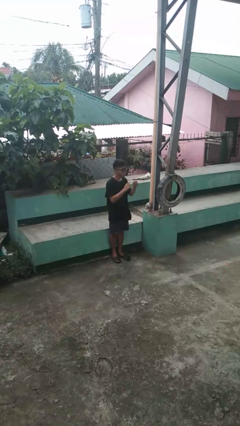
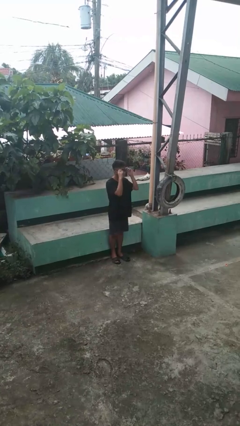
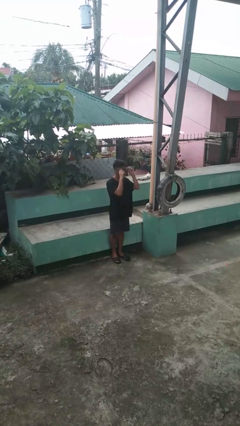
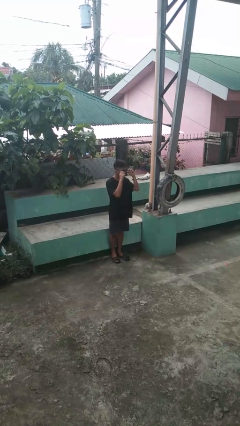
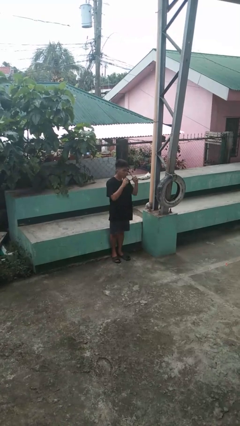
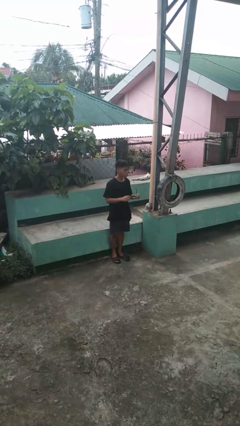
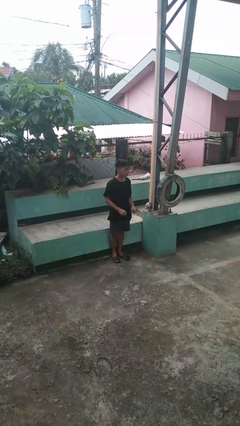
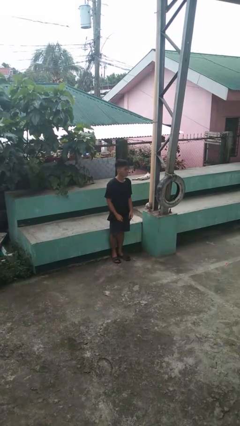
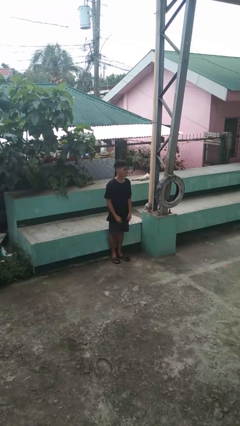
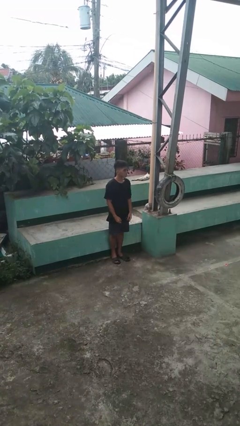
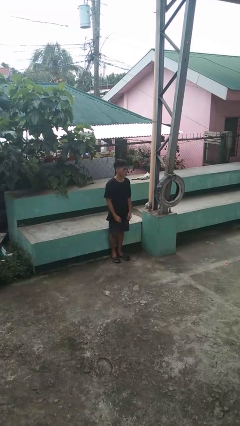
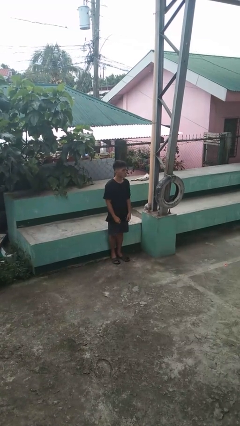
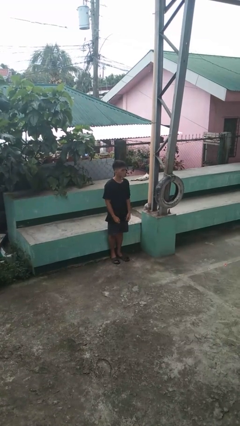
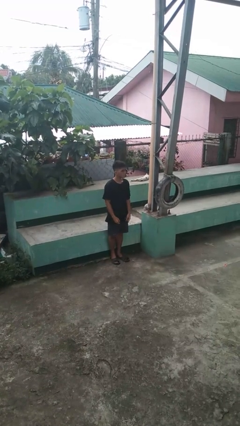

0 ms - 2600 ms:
person takes off sunglasses

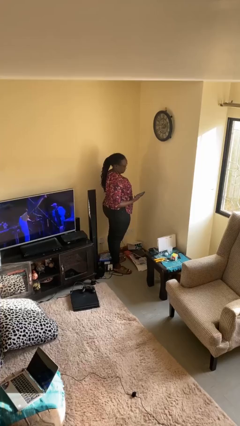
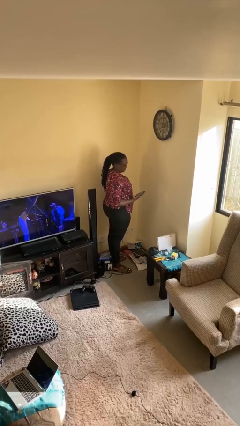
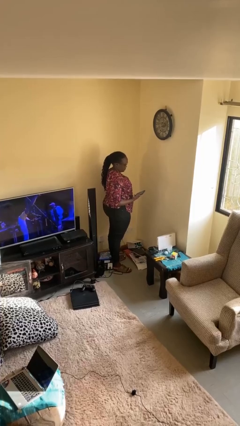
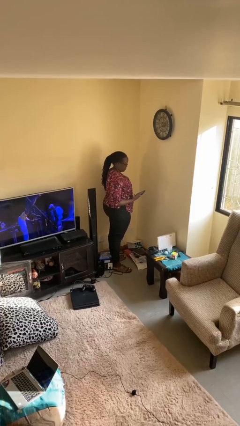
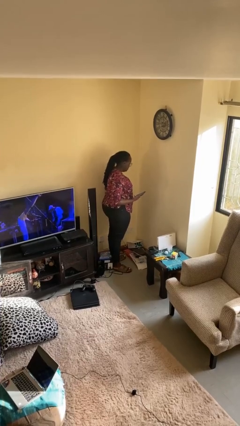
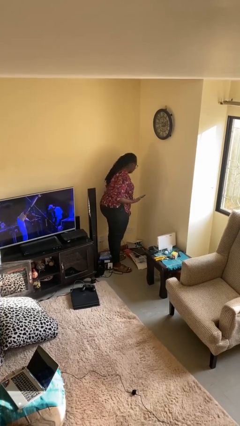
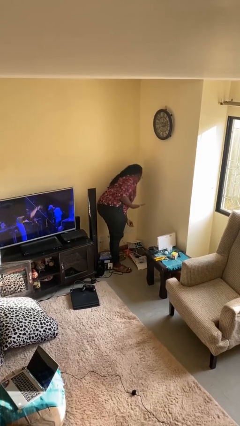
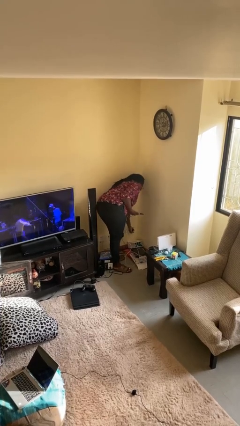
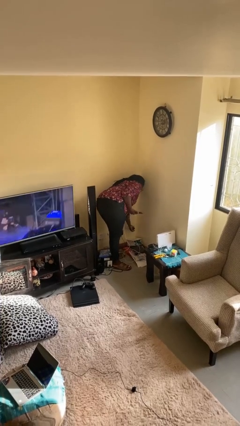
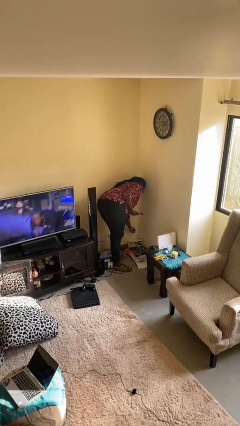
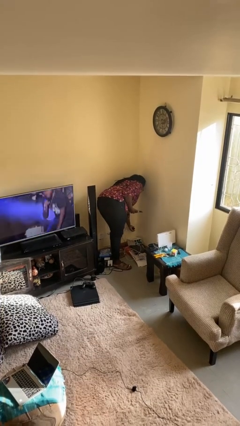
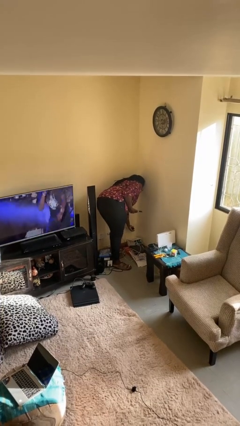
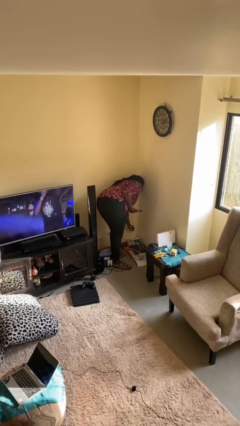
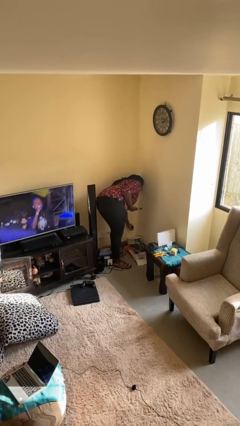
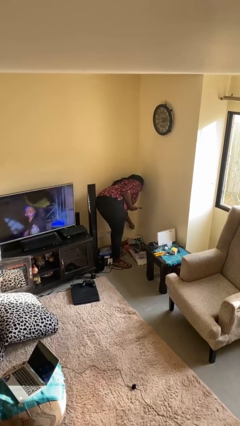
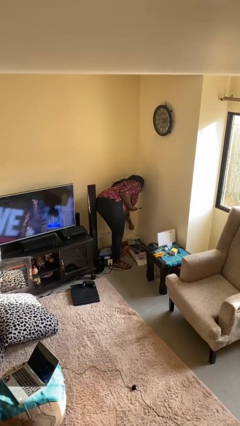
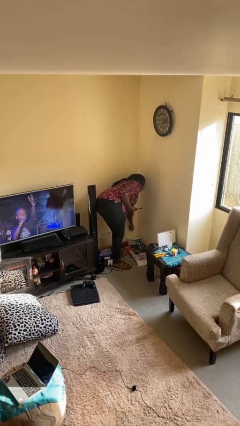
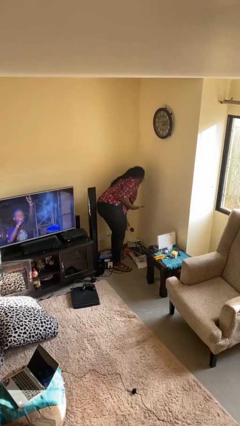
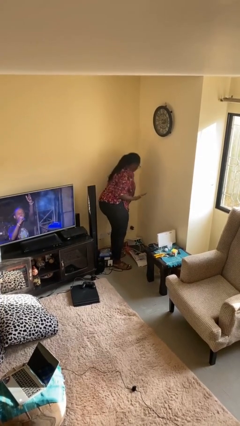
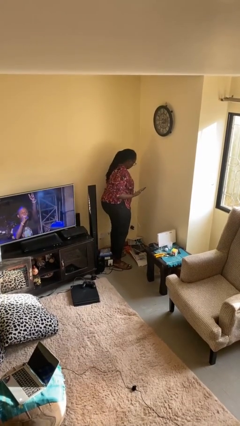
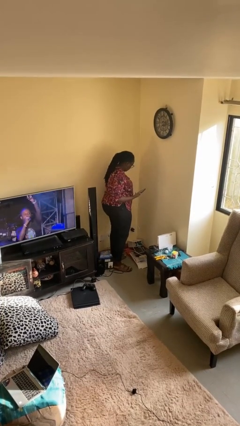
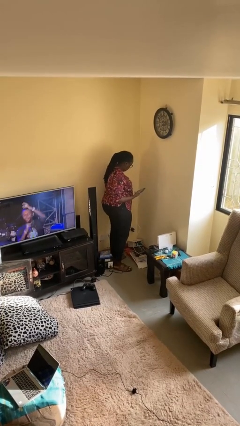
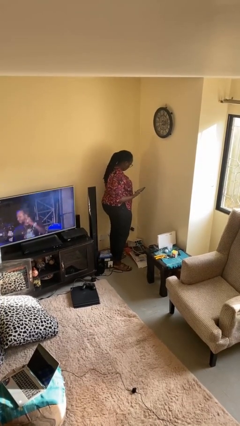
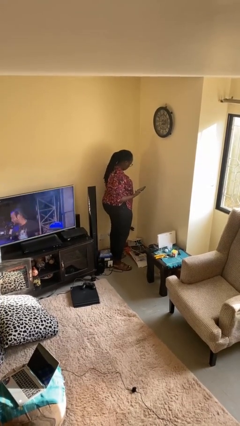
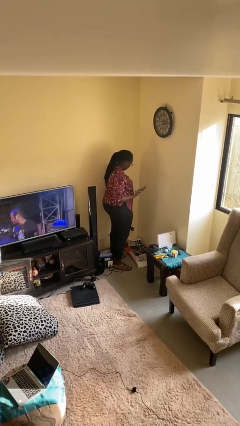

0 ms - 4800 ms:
person plugs into electrical socket

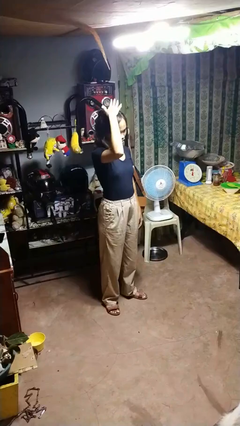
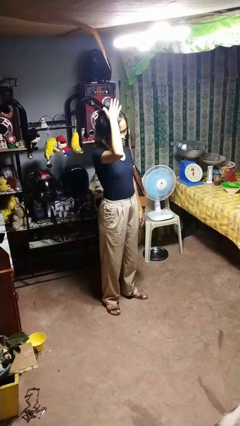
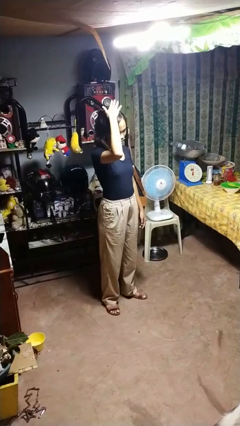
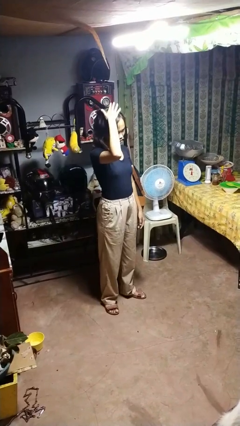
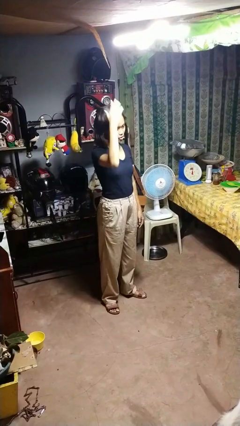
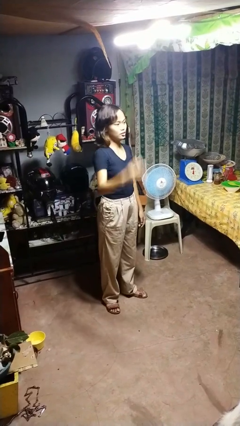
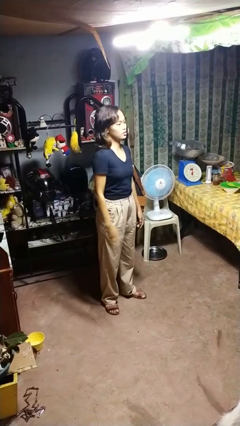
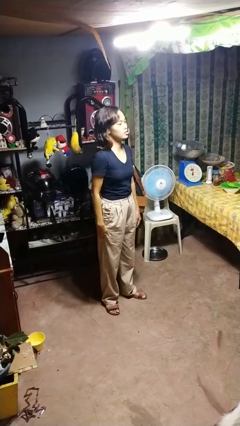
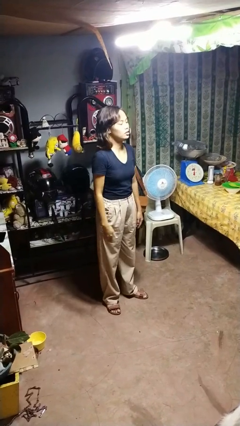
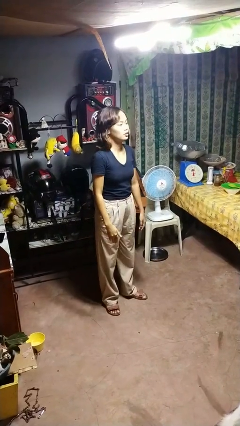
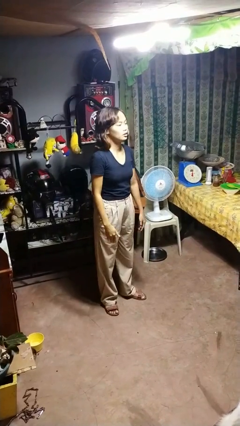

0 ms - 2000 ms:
person pats head

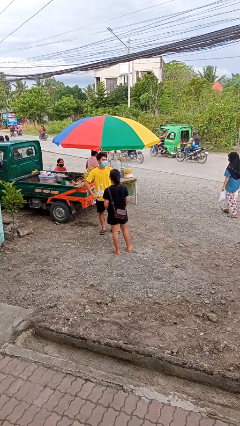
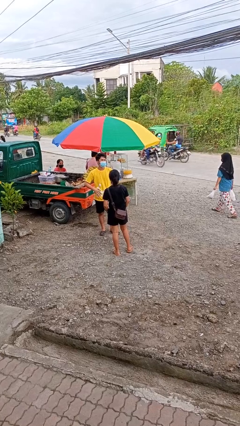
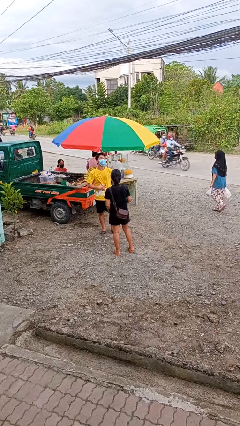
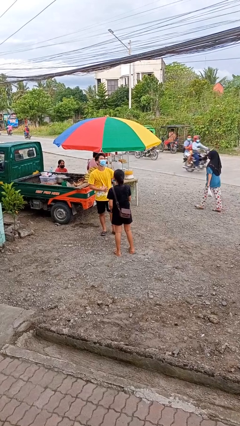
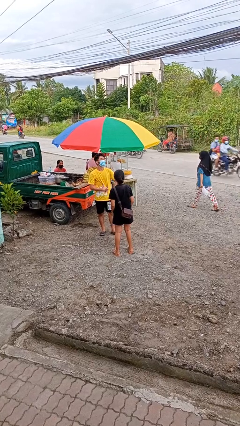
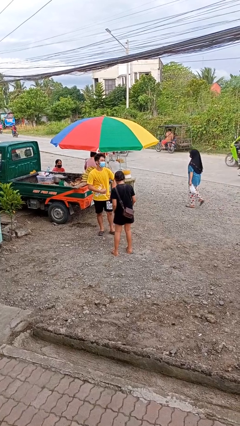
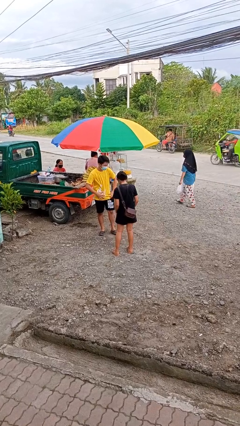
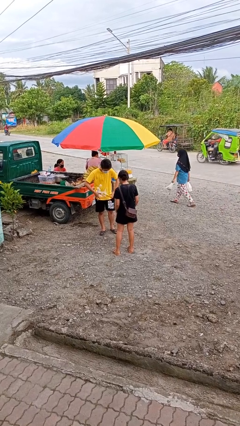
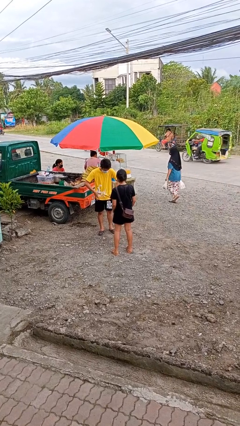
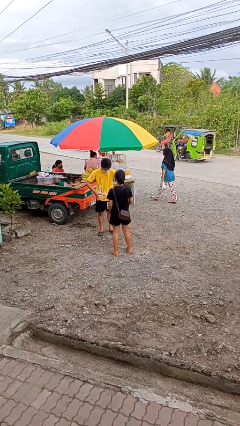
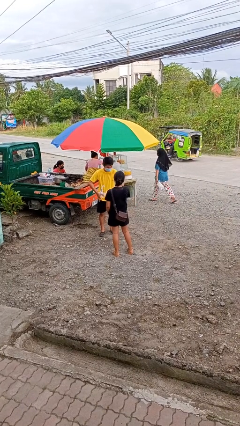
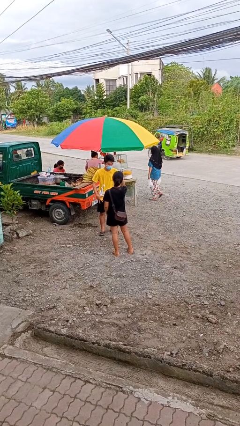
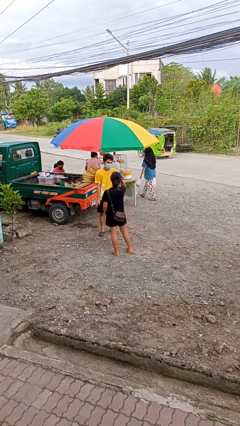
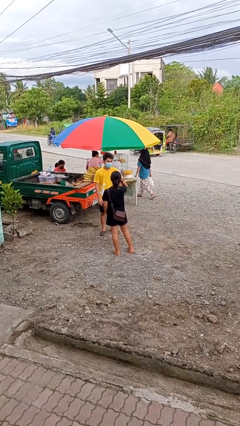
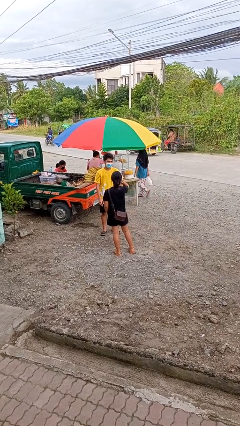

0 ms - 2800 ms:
person laughs with person

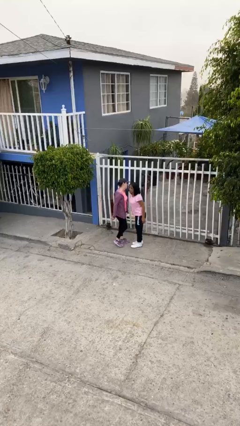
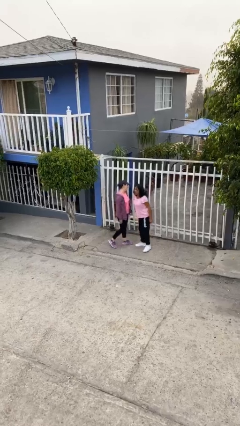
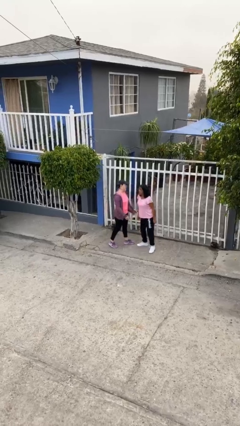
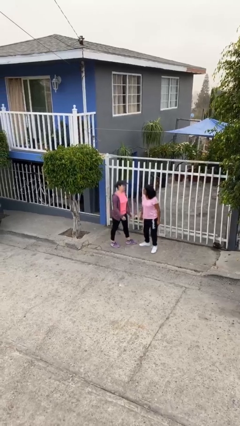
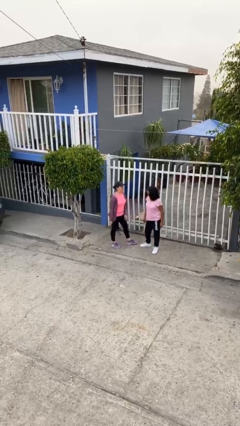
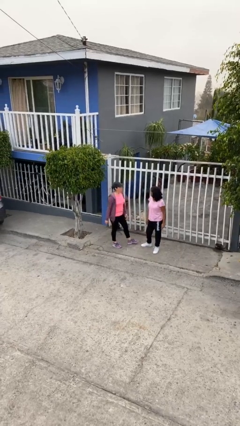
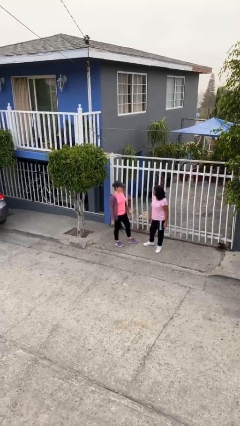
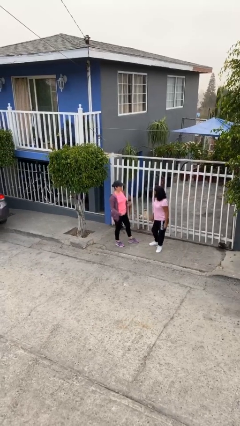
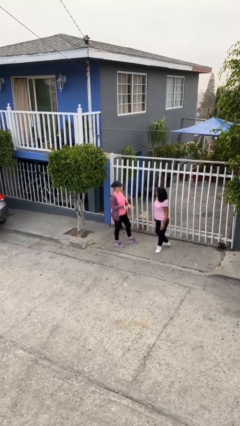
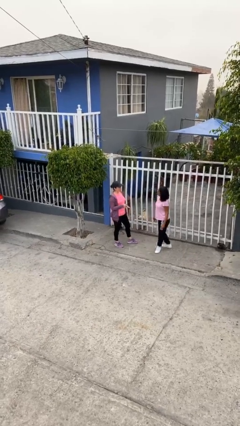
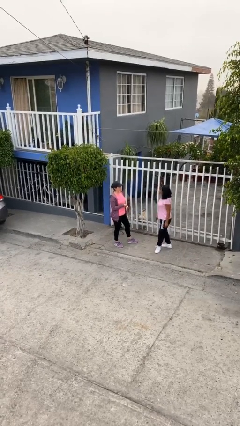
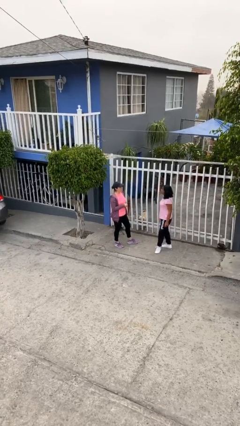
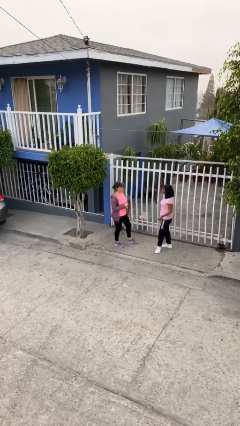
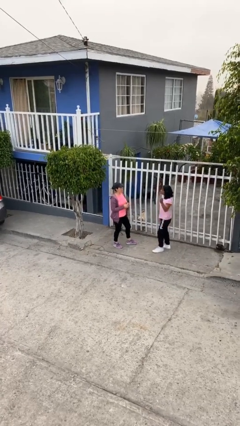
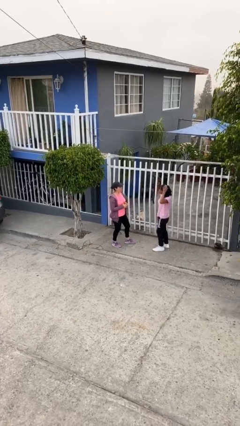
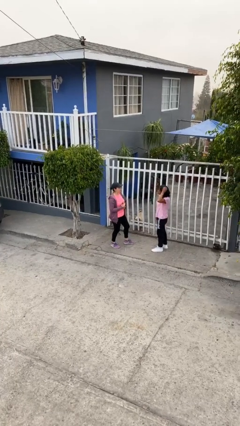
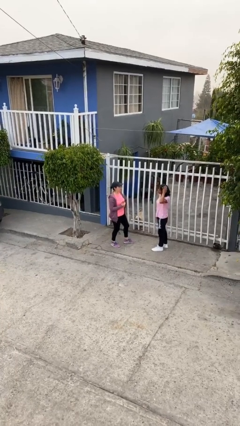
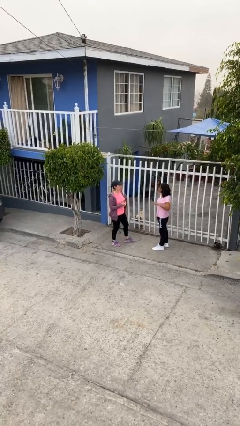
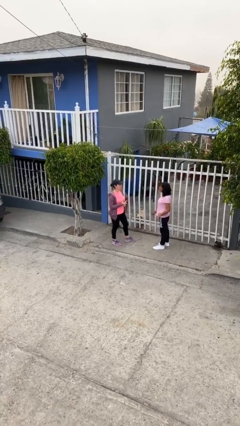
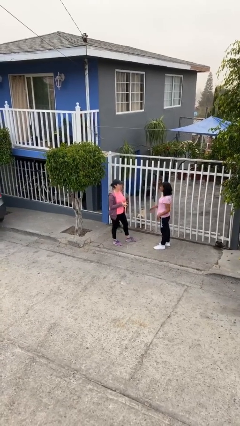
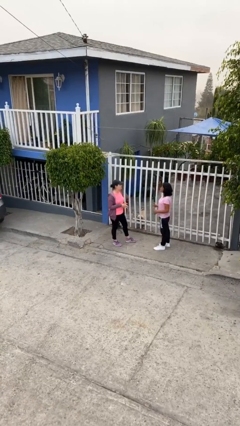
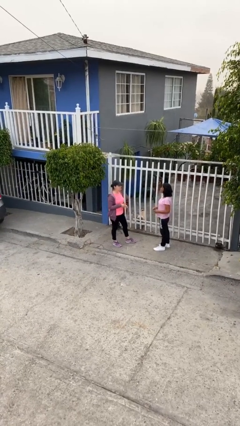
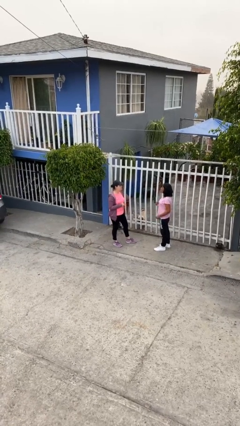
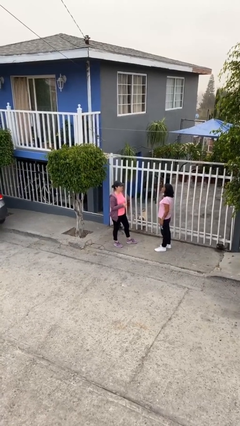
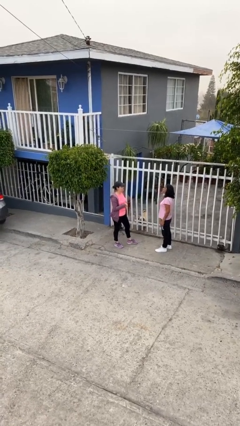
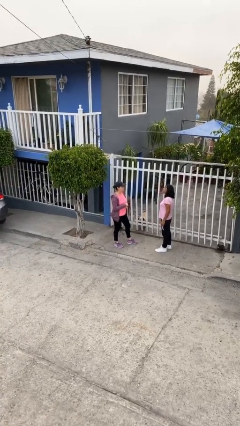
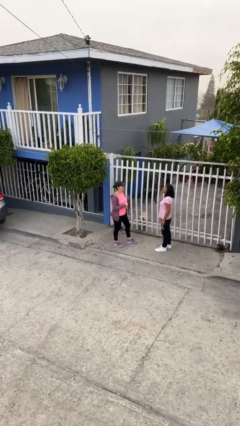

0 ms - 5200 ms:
person talks to person

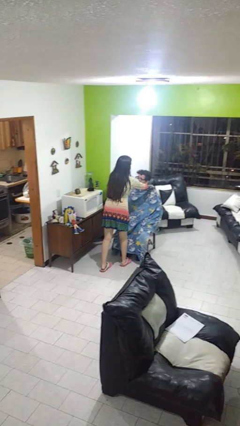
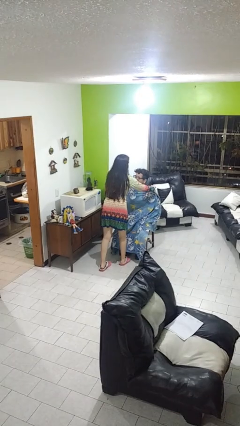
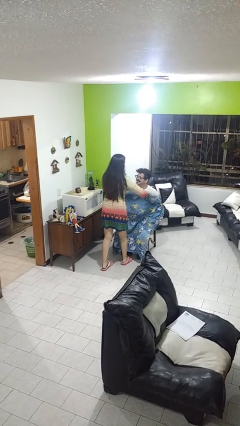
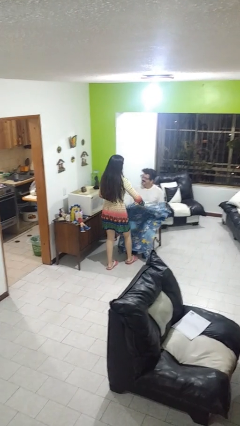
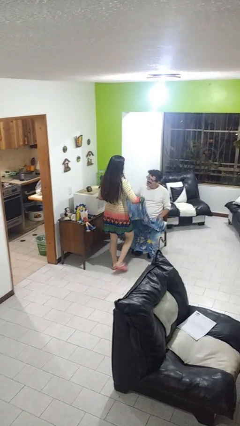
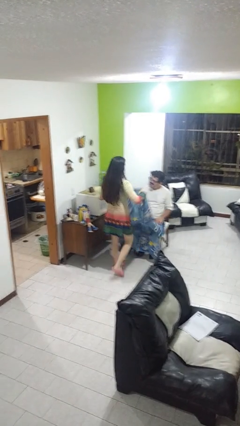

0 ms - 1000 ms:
person uncovers friend with blanket
